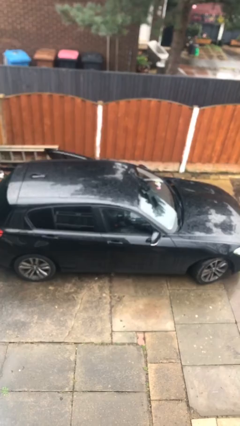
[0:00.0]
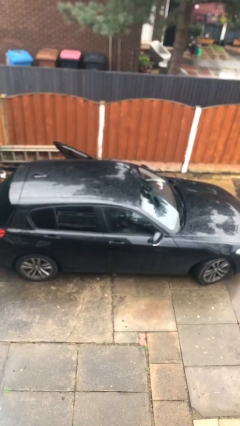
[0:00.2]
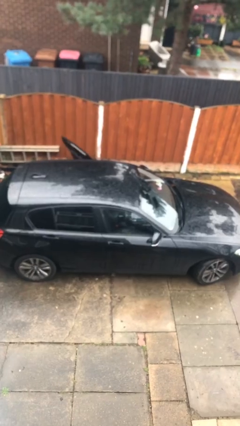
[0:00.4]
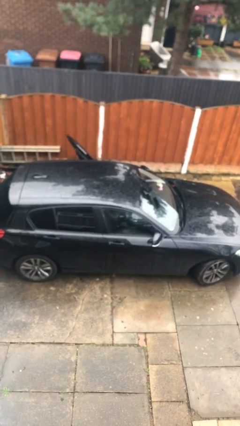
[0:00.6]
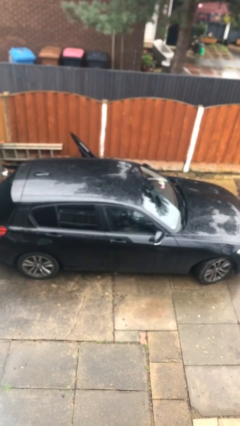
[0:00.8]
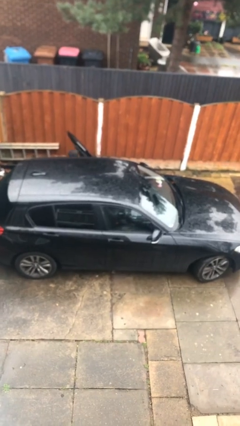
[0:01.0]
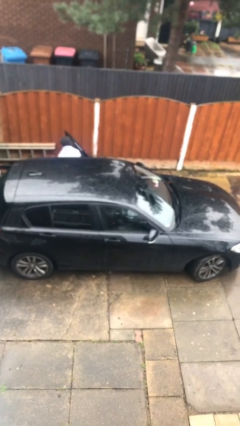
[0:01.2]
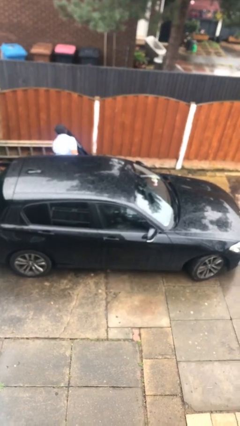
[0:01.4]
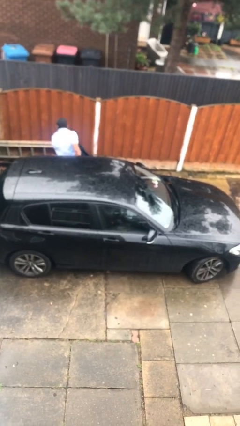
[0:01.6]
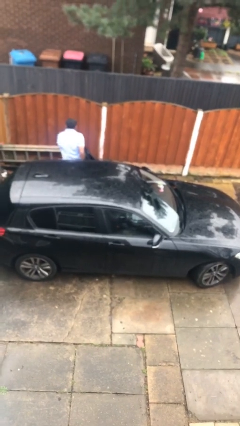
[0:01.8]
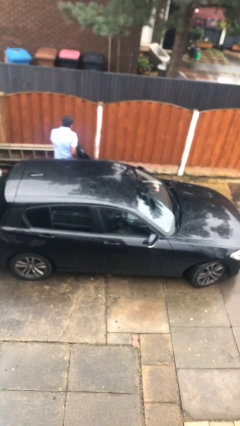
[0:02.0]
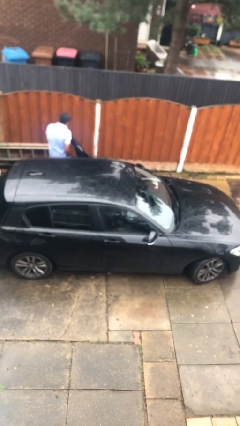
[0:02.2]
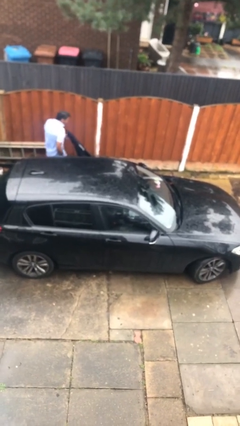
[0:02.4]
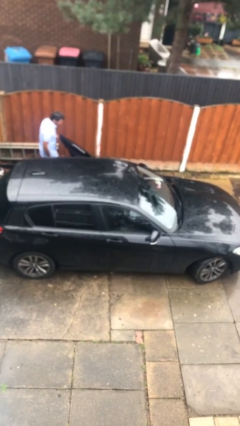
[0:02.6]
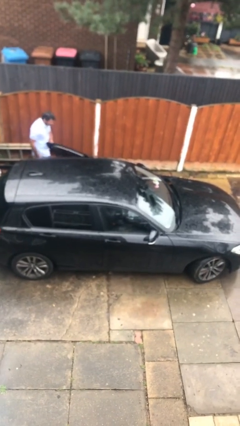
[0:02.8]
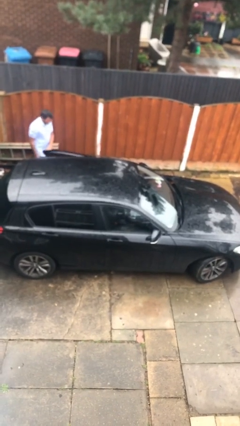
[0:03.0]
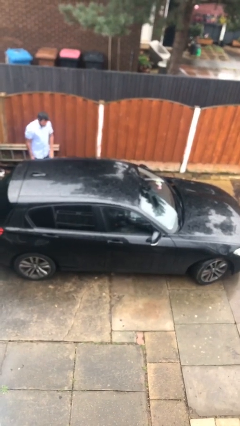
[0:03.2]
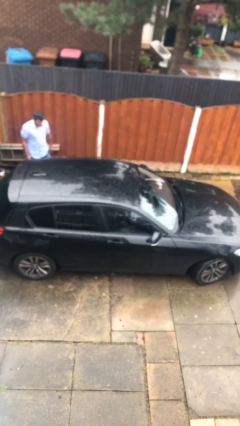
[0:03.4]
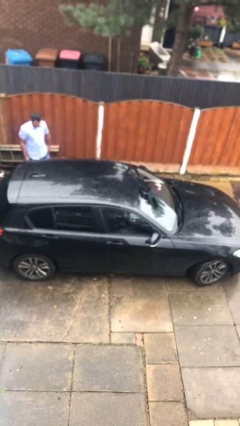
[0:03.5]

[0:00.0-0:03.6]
car drops off person

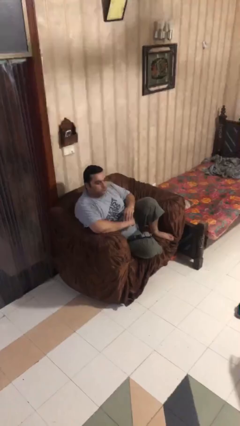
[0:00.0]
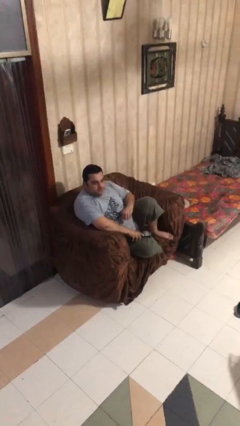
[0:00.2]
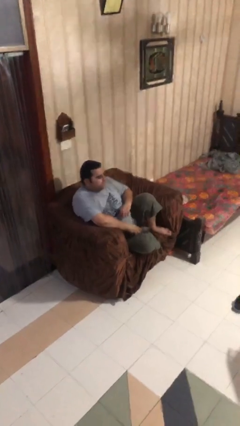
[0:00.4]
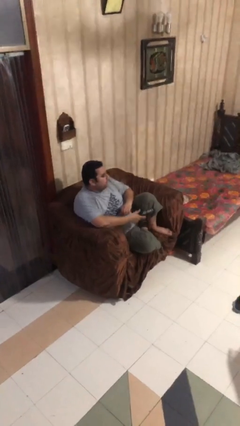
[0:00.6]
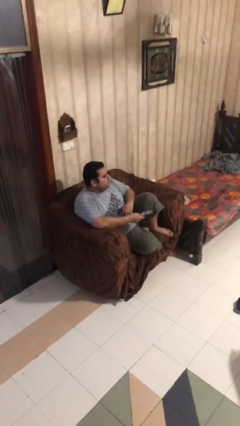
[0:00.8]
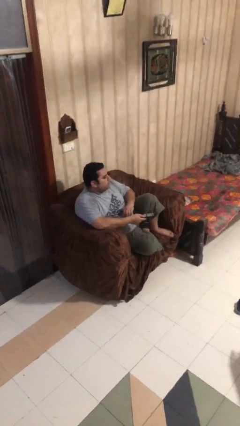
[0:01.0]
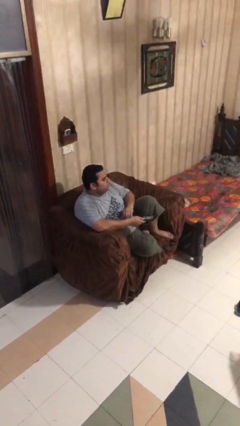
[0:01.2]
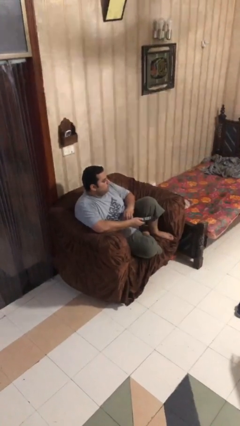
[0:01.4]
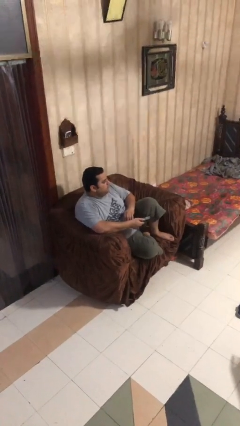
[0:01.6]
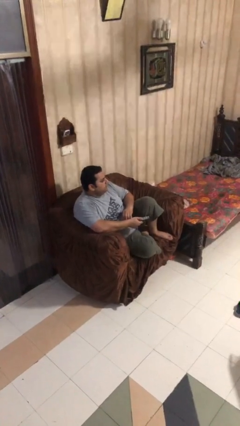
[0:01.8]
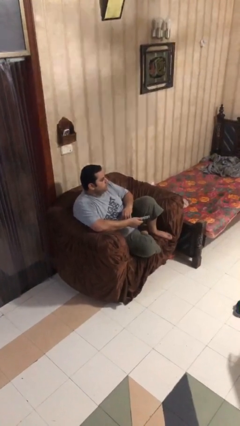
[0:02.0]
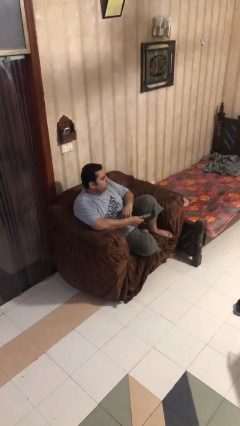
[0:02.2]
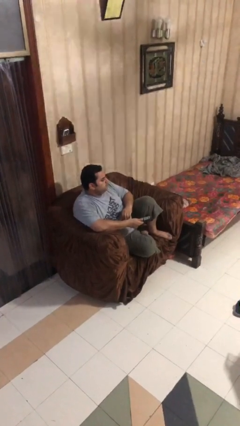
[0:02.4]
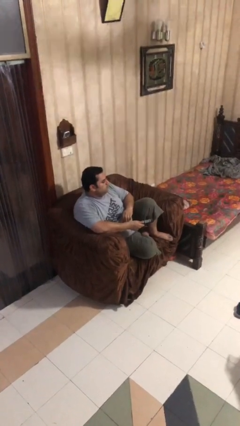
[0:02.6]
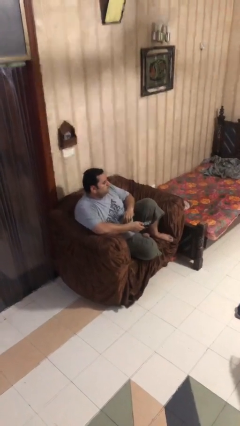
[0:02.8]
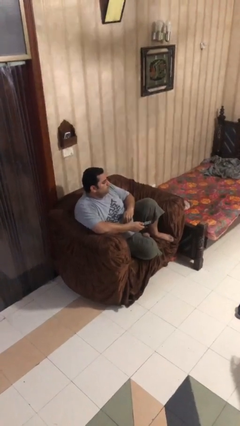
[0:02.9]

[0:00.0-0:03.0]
person uses television remote

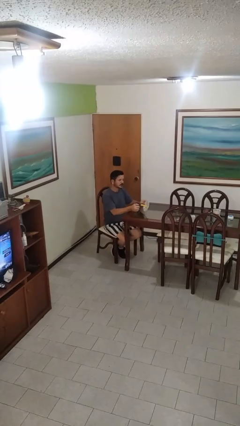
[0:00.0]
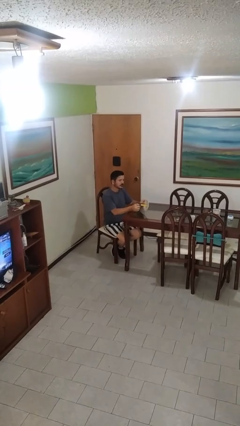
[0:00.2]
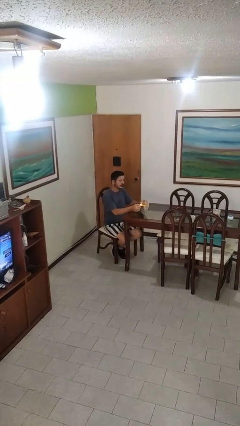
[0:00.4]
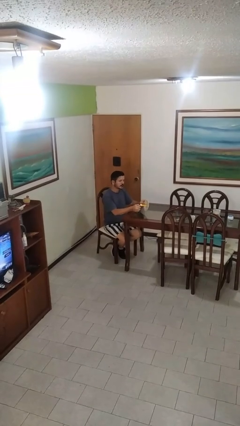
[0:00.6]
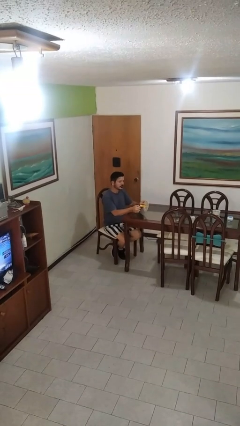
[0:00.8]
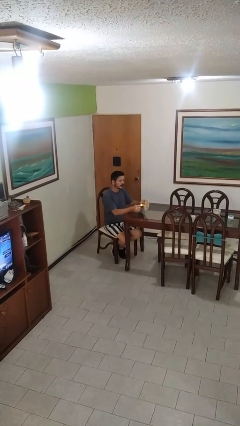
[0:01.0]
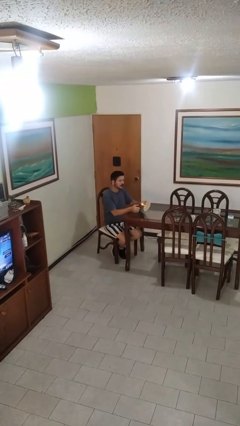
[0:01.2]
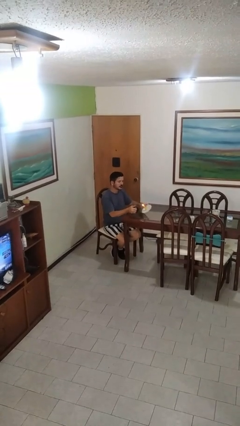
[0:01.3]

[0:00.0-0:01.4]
person lights candle

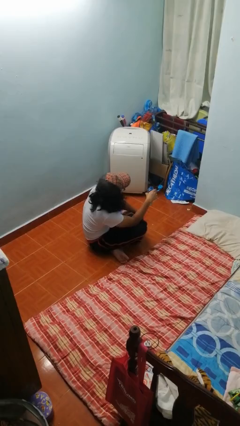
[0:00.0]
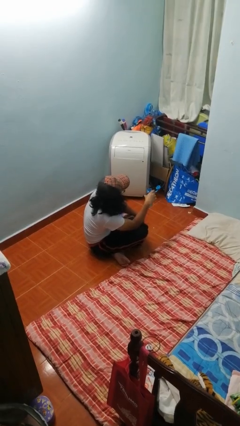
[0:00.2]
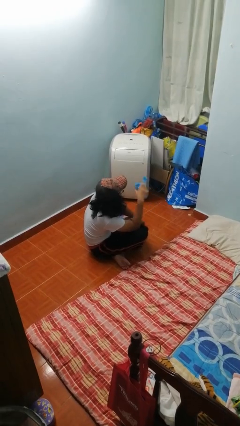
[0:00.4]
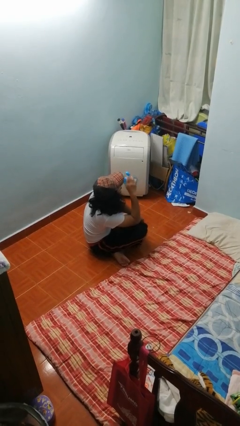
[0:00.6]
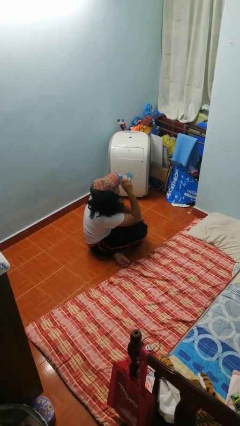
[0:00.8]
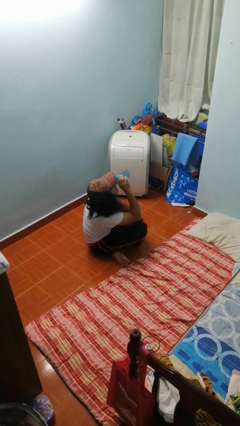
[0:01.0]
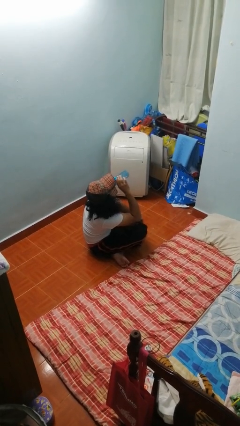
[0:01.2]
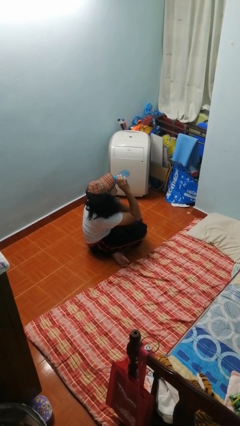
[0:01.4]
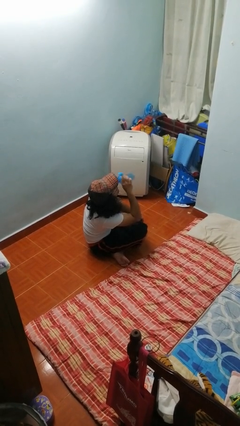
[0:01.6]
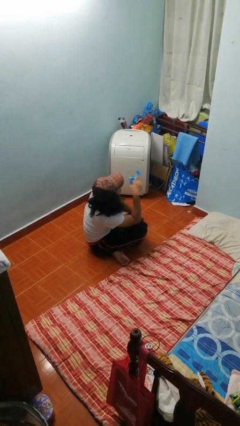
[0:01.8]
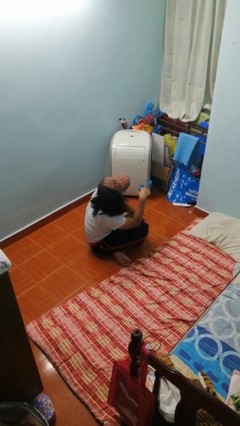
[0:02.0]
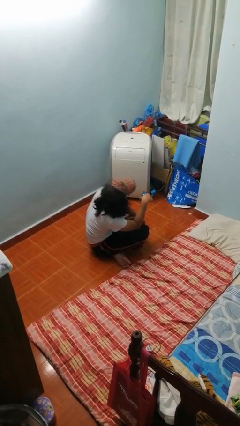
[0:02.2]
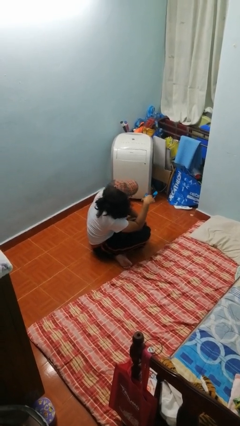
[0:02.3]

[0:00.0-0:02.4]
person drinks from bottle

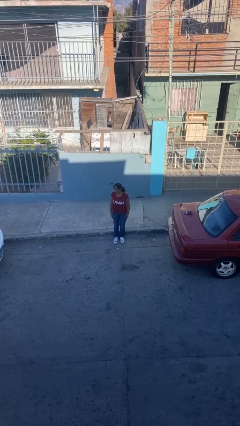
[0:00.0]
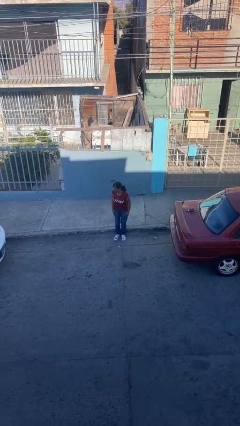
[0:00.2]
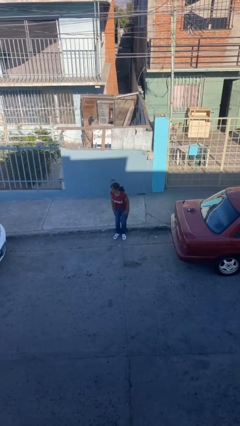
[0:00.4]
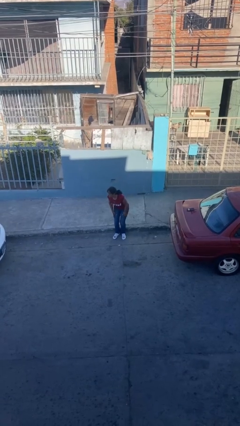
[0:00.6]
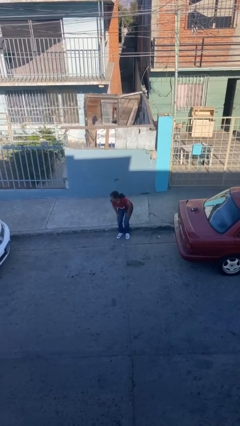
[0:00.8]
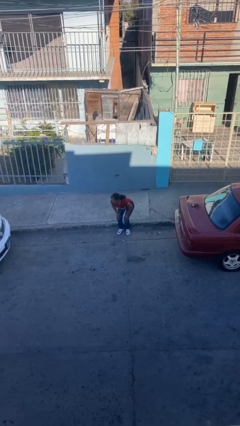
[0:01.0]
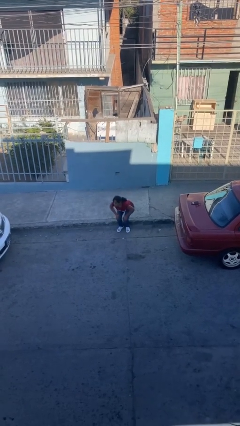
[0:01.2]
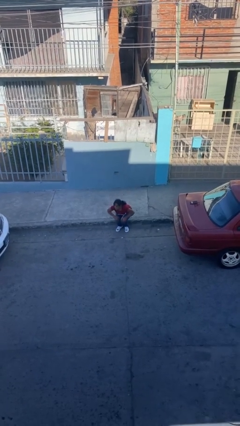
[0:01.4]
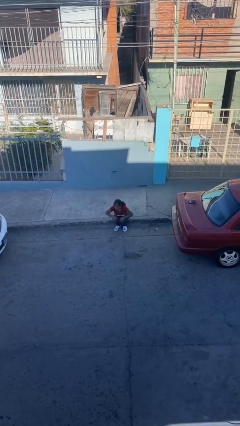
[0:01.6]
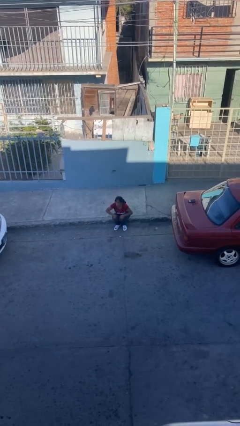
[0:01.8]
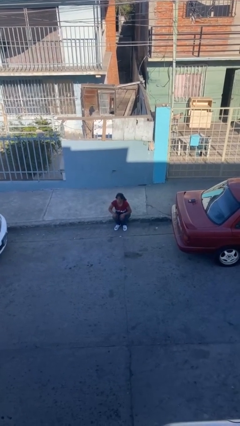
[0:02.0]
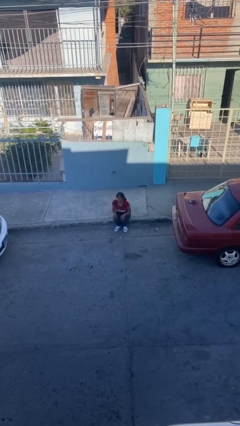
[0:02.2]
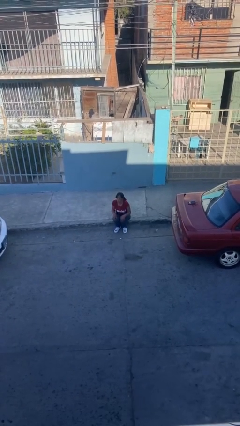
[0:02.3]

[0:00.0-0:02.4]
person sits down

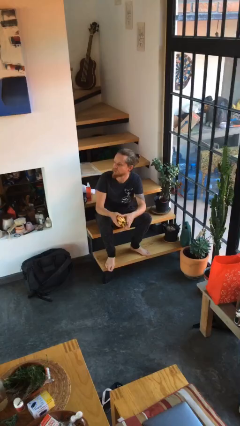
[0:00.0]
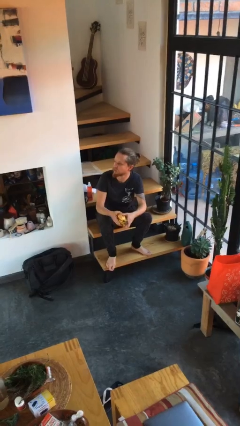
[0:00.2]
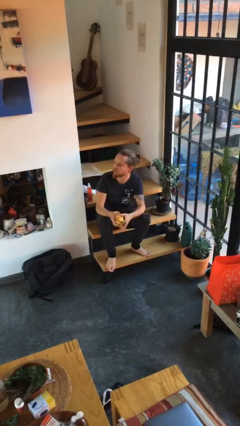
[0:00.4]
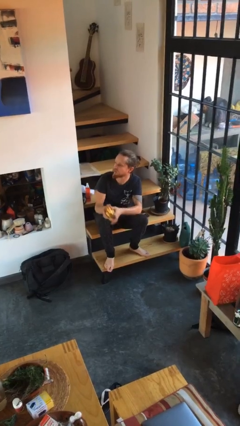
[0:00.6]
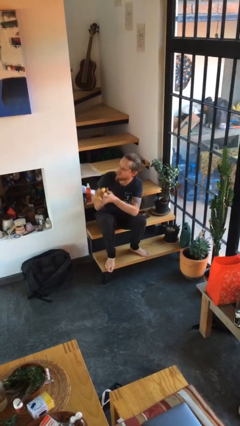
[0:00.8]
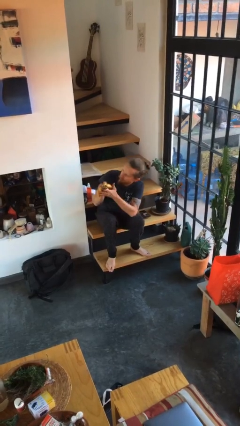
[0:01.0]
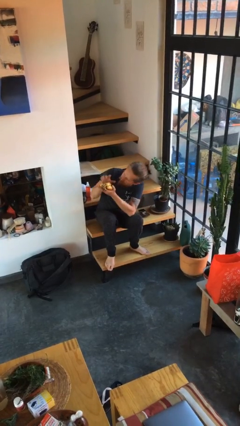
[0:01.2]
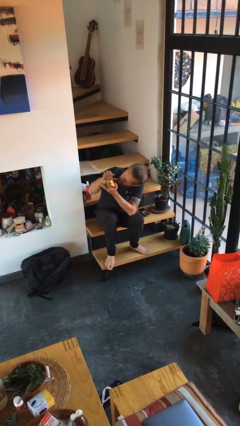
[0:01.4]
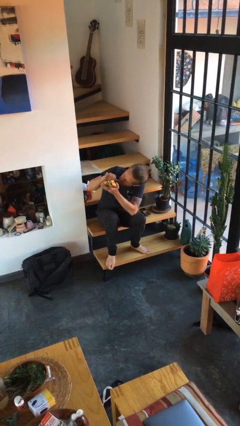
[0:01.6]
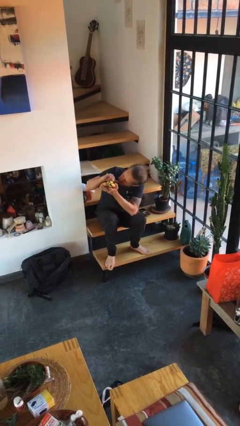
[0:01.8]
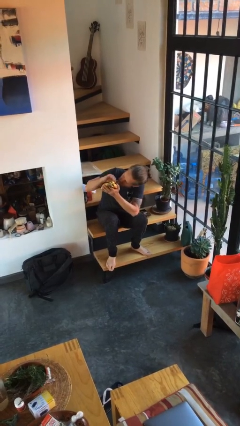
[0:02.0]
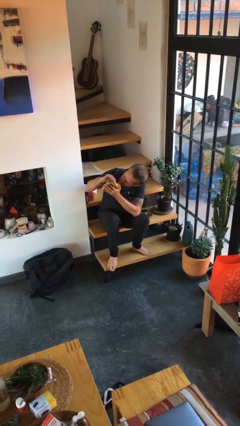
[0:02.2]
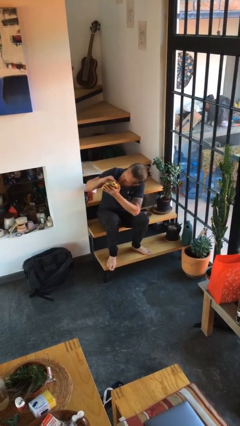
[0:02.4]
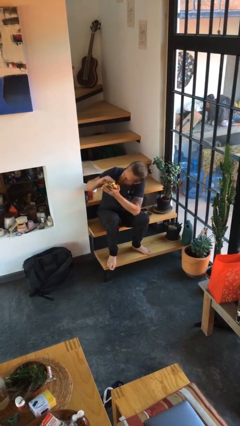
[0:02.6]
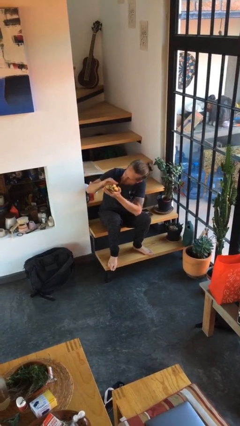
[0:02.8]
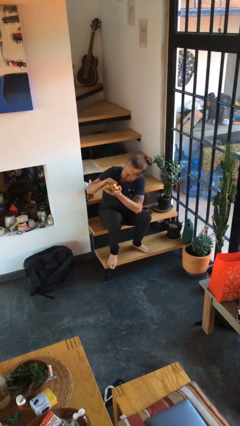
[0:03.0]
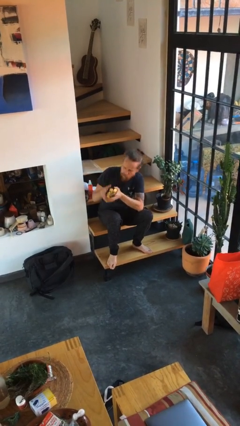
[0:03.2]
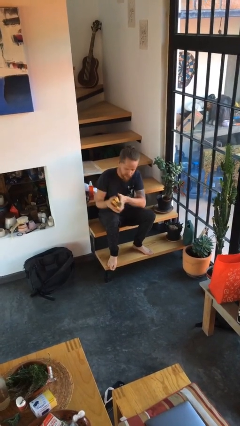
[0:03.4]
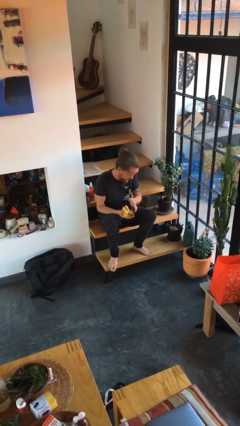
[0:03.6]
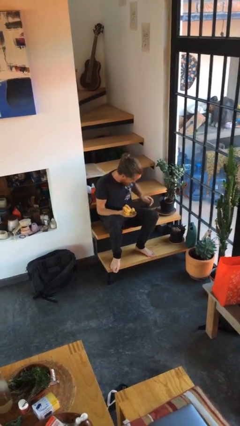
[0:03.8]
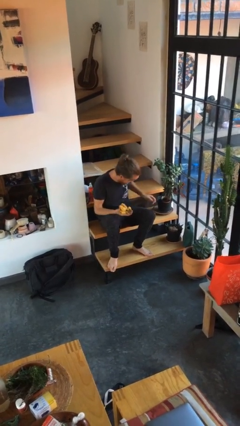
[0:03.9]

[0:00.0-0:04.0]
person taps object with finger

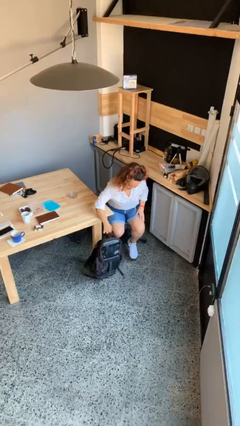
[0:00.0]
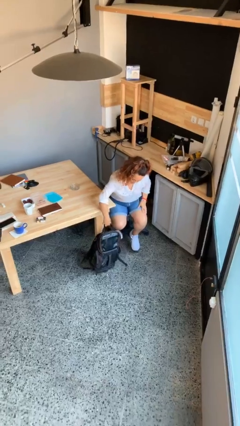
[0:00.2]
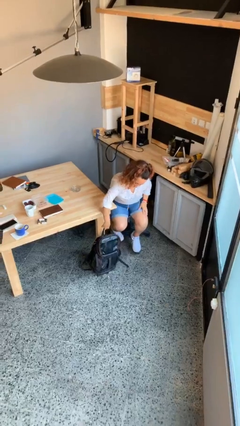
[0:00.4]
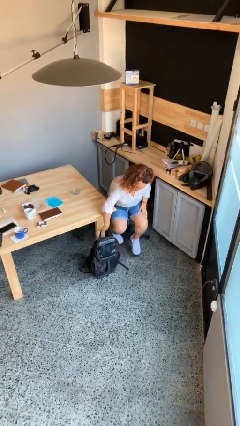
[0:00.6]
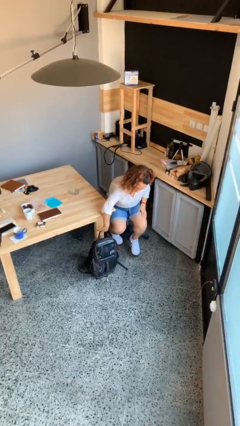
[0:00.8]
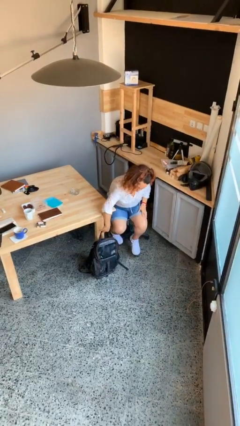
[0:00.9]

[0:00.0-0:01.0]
person puts down object on floor
